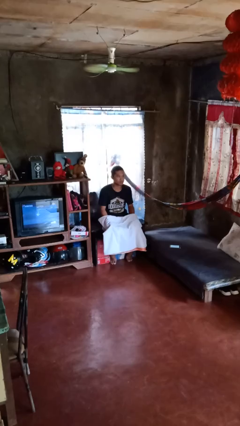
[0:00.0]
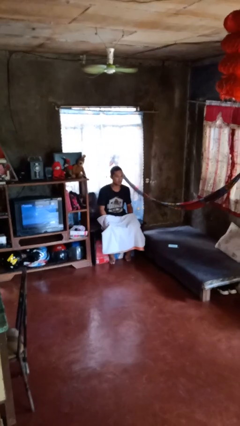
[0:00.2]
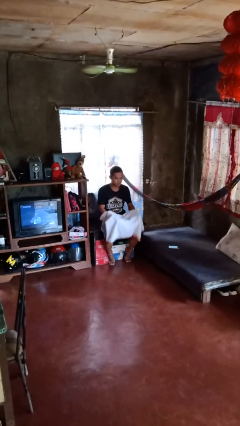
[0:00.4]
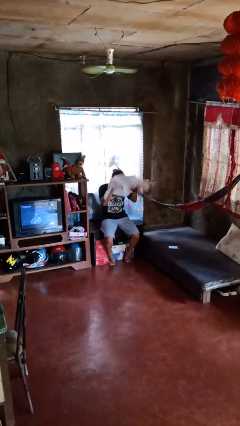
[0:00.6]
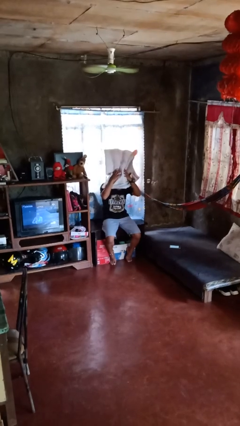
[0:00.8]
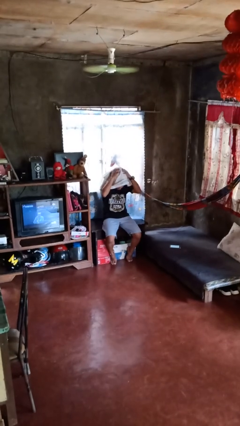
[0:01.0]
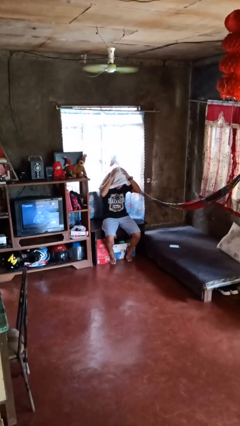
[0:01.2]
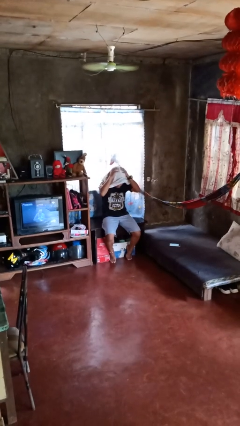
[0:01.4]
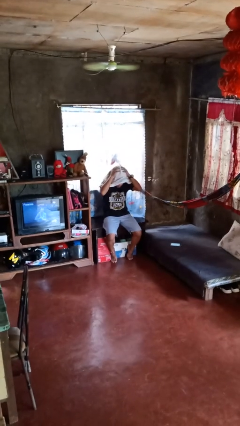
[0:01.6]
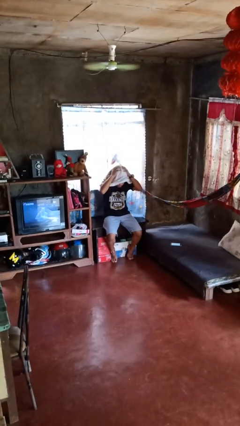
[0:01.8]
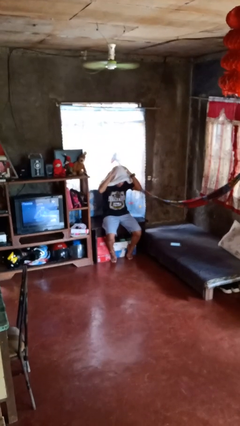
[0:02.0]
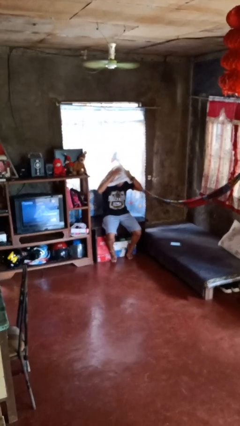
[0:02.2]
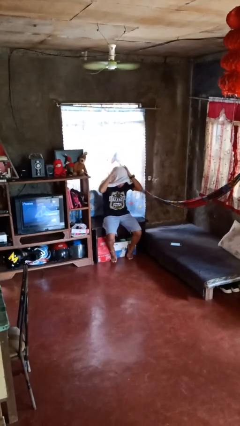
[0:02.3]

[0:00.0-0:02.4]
person wraps box

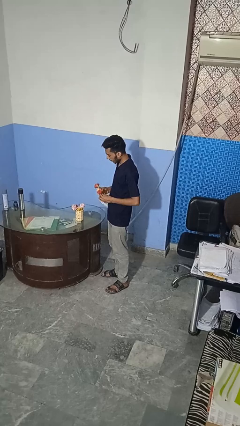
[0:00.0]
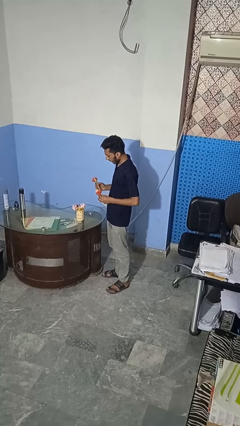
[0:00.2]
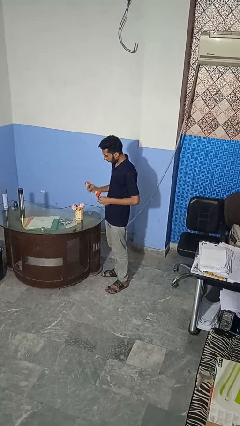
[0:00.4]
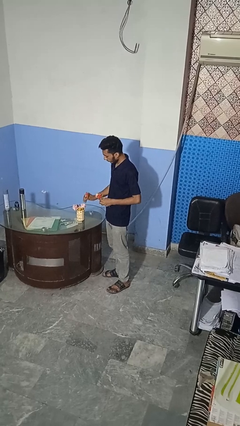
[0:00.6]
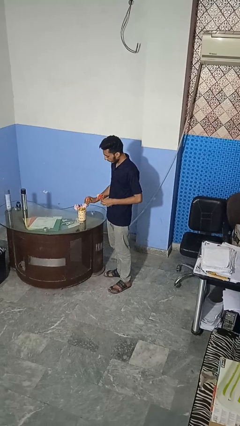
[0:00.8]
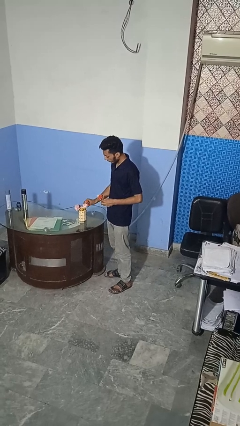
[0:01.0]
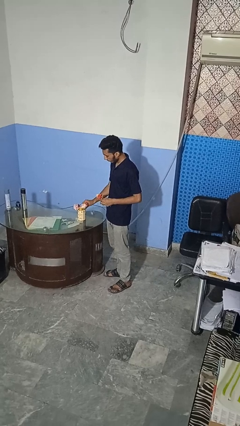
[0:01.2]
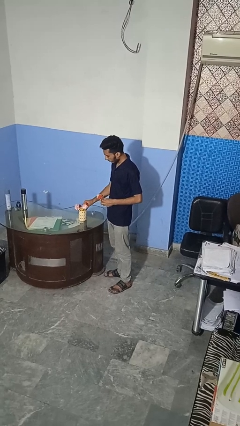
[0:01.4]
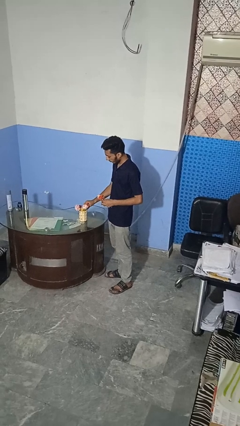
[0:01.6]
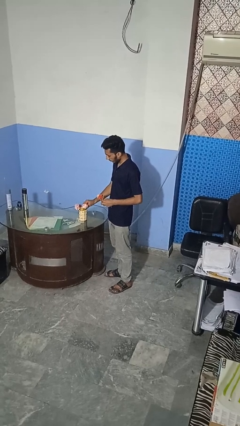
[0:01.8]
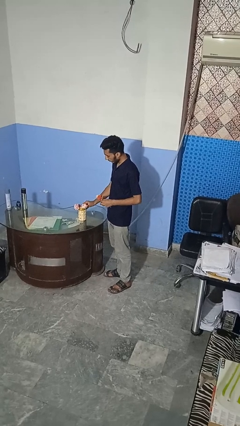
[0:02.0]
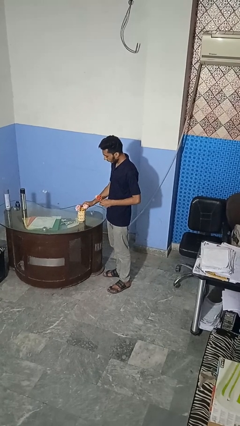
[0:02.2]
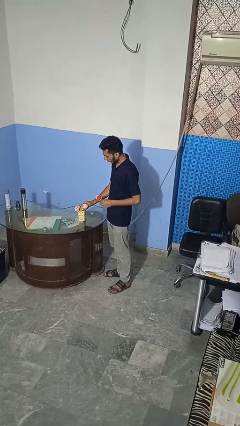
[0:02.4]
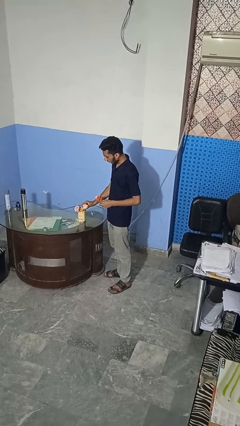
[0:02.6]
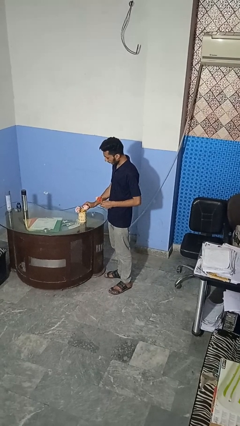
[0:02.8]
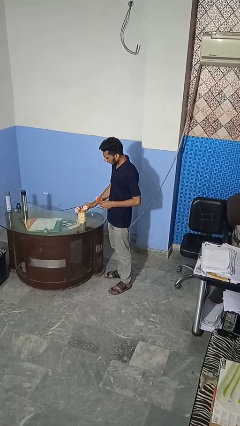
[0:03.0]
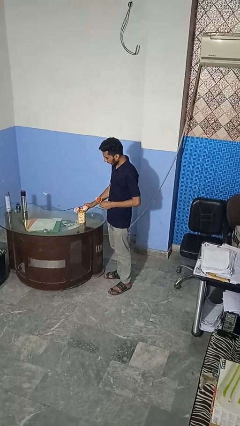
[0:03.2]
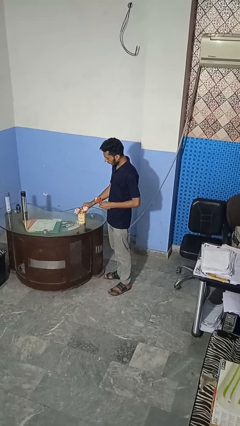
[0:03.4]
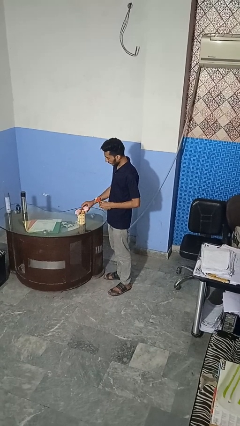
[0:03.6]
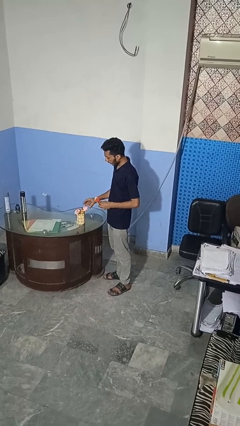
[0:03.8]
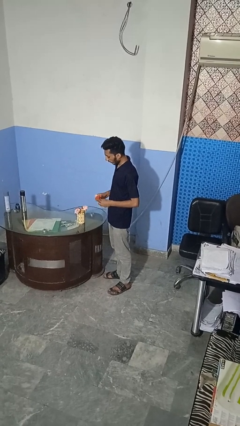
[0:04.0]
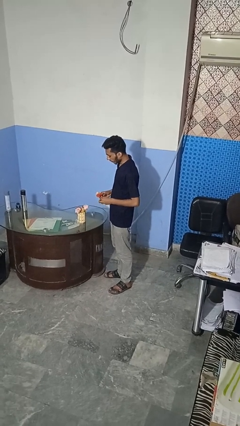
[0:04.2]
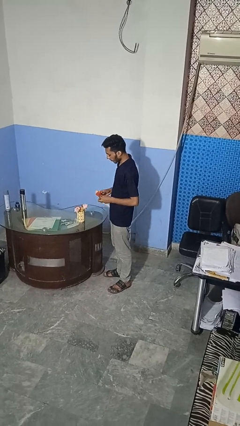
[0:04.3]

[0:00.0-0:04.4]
person arranges flowers in vase

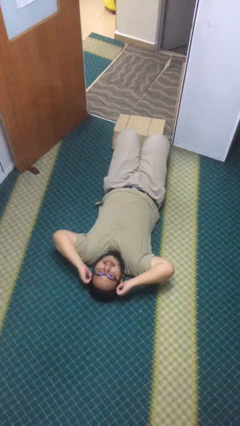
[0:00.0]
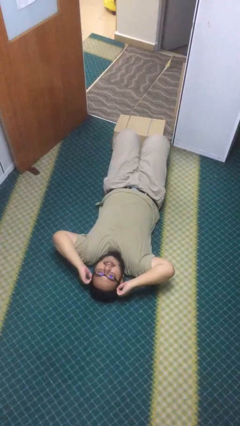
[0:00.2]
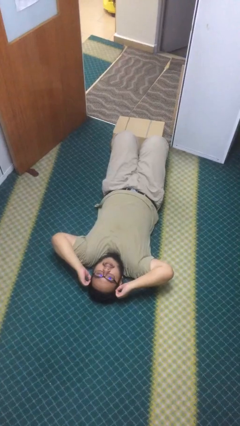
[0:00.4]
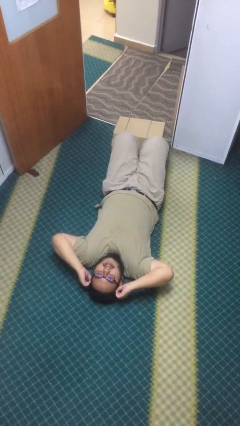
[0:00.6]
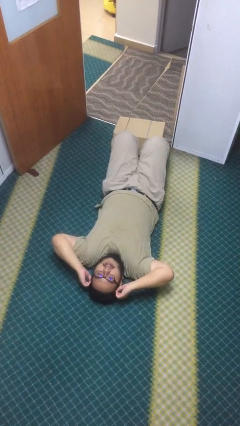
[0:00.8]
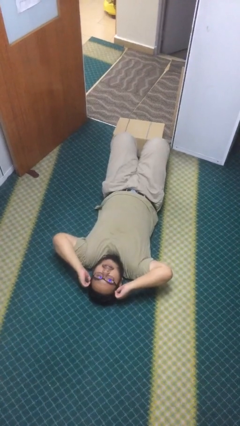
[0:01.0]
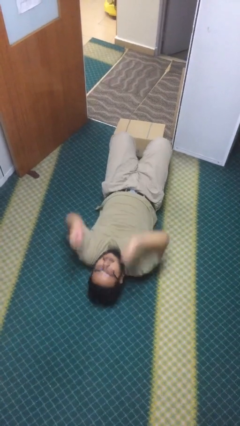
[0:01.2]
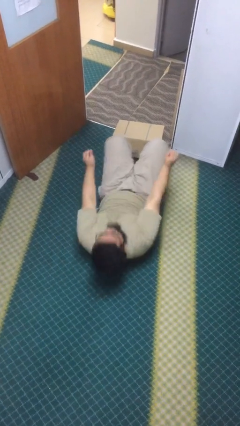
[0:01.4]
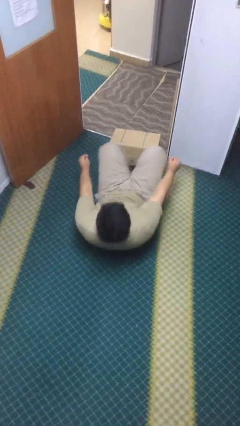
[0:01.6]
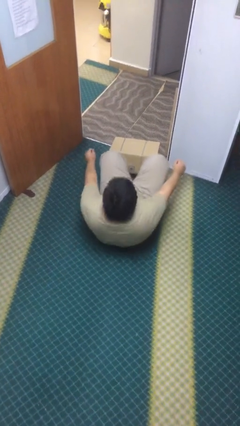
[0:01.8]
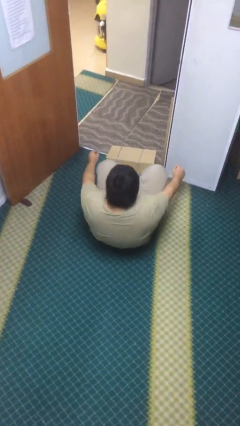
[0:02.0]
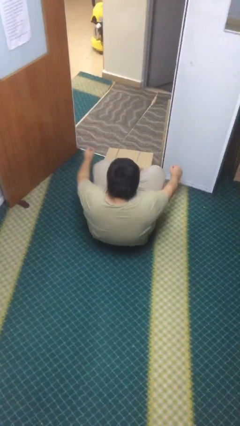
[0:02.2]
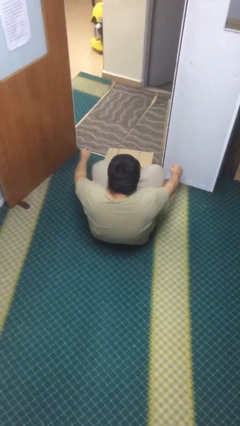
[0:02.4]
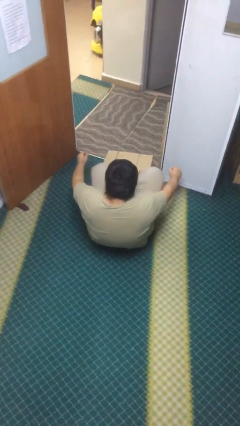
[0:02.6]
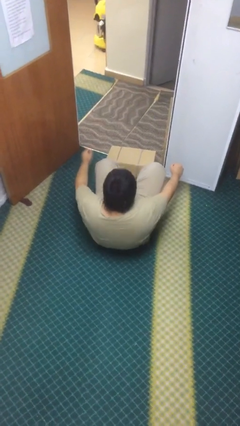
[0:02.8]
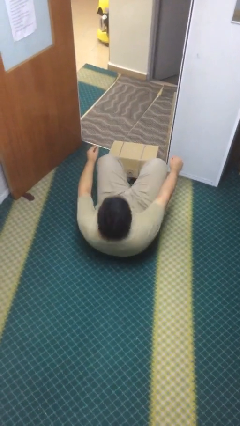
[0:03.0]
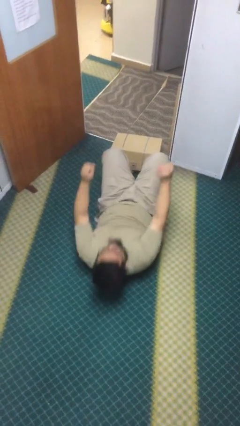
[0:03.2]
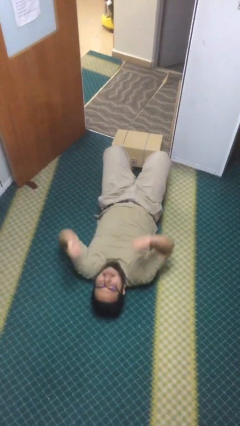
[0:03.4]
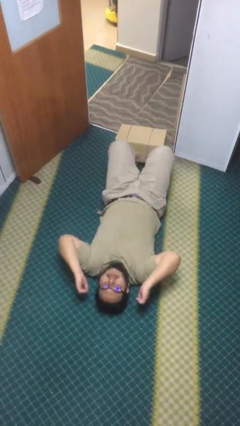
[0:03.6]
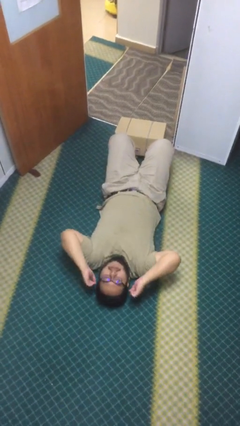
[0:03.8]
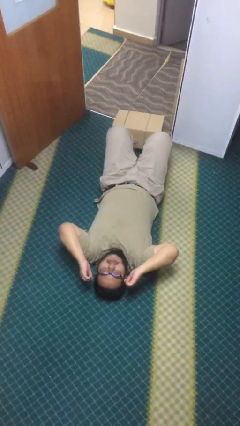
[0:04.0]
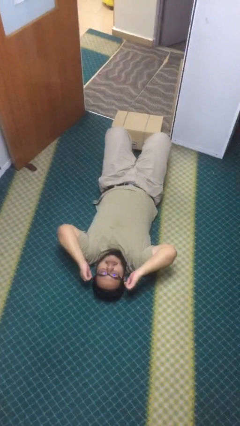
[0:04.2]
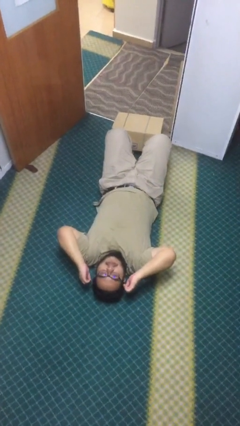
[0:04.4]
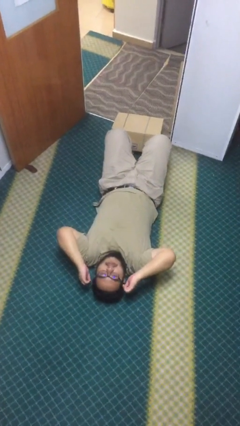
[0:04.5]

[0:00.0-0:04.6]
person exercises with situp

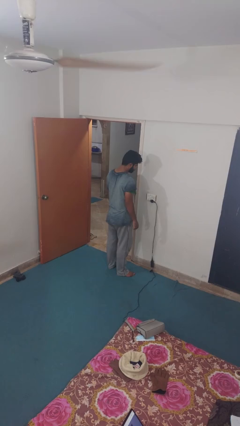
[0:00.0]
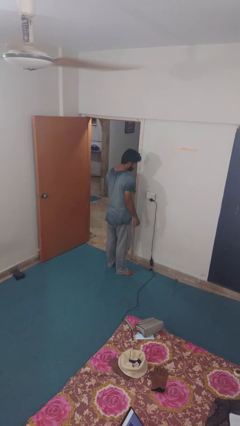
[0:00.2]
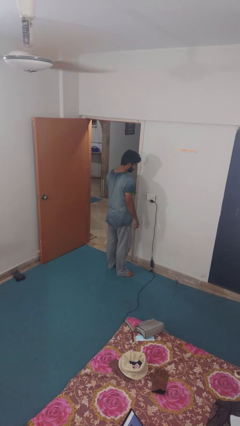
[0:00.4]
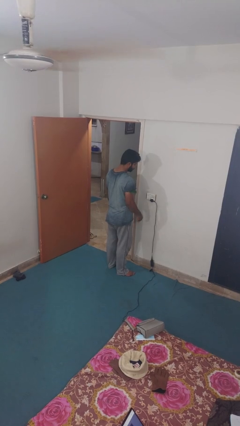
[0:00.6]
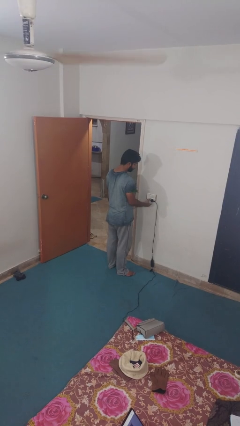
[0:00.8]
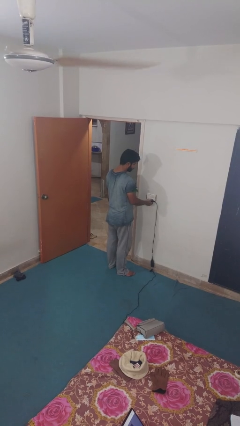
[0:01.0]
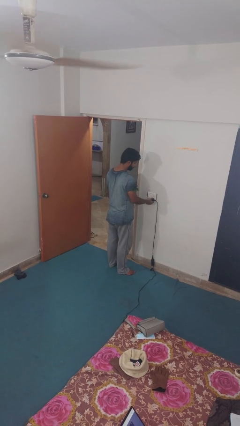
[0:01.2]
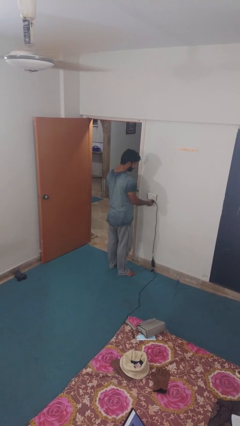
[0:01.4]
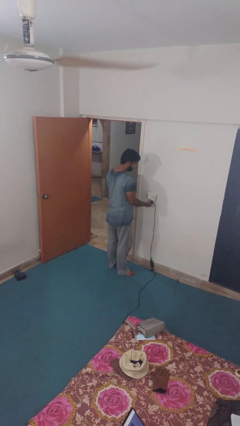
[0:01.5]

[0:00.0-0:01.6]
person unplugs from electrical socket

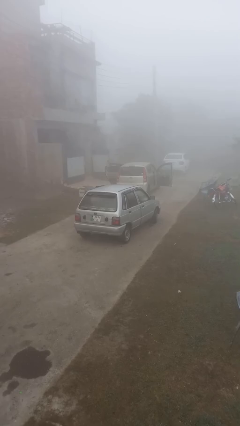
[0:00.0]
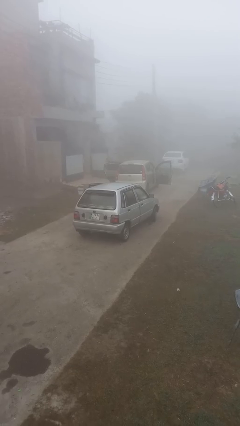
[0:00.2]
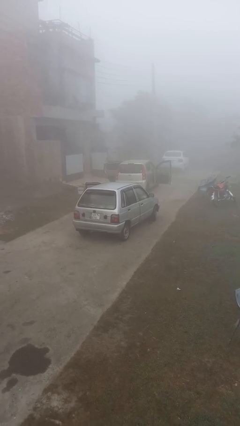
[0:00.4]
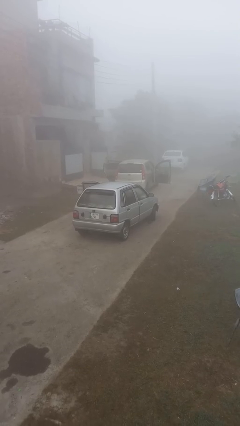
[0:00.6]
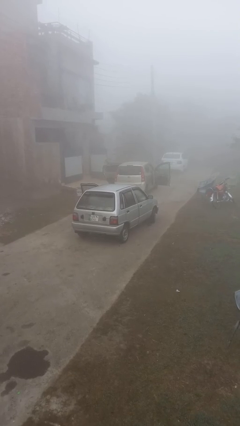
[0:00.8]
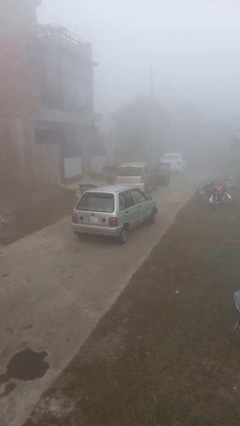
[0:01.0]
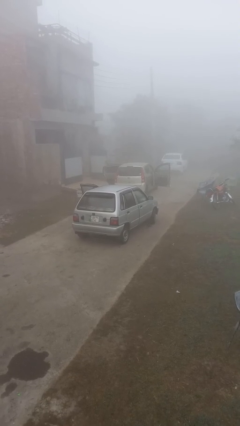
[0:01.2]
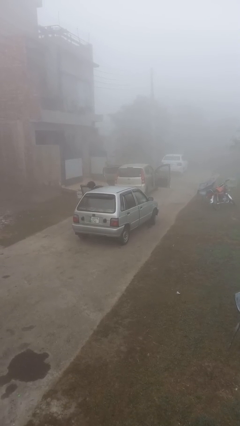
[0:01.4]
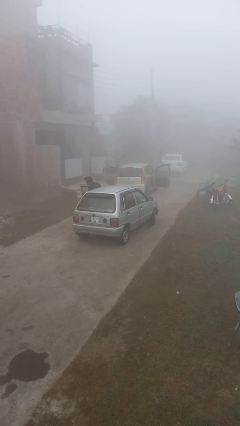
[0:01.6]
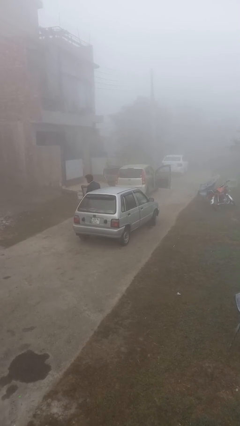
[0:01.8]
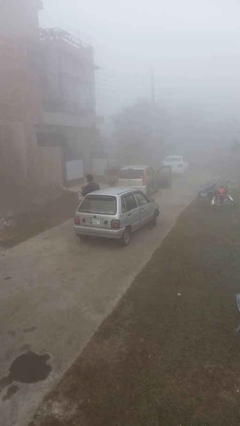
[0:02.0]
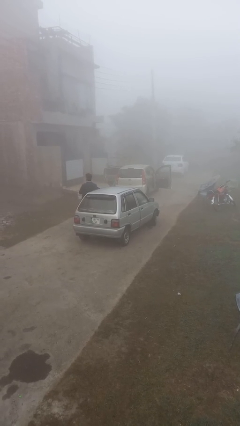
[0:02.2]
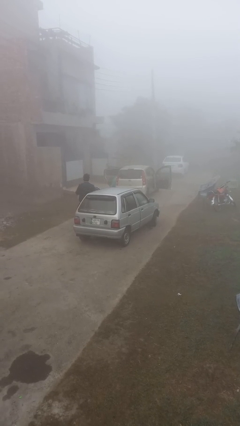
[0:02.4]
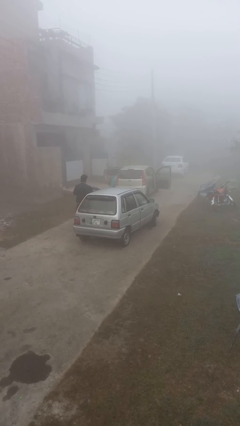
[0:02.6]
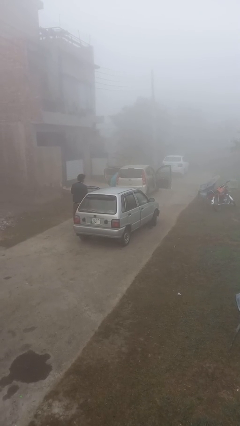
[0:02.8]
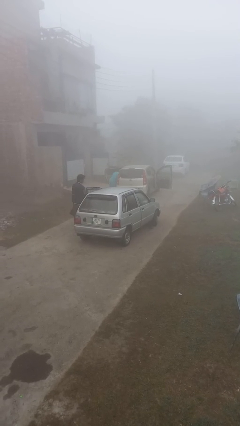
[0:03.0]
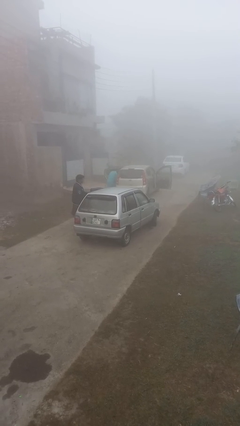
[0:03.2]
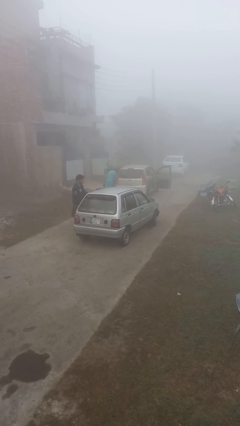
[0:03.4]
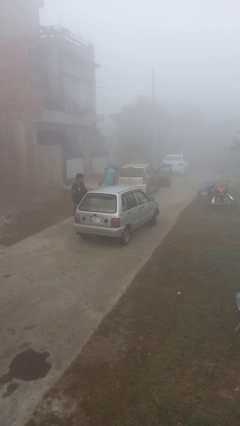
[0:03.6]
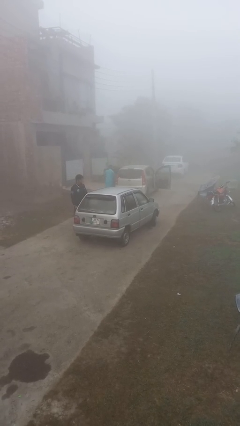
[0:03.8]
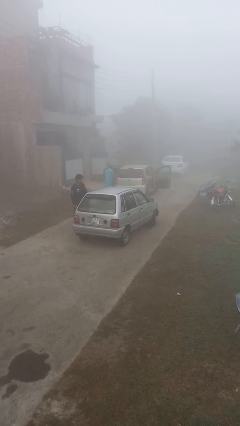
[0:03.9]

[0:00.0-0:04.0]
car drops off person

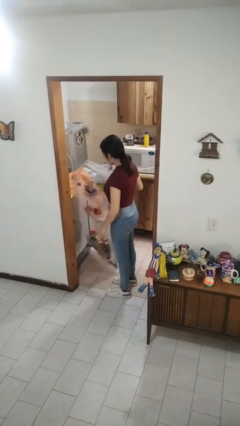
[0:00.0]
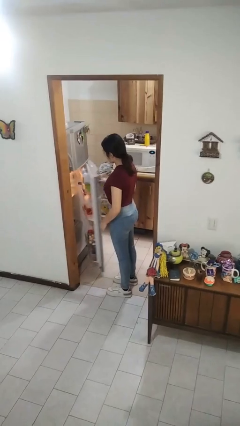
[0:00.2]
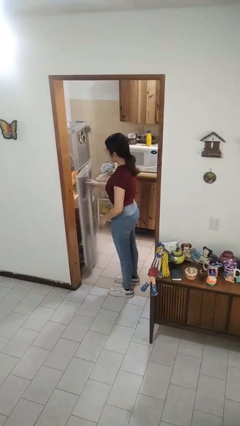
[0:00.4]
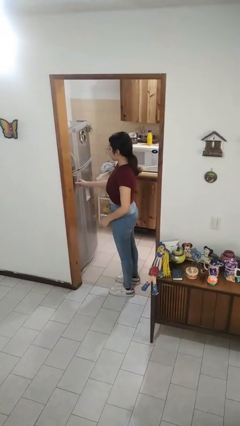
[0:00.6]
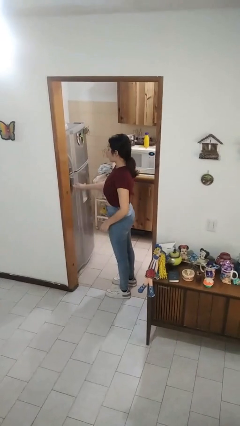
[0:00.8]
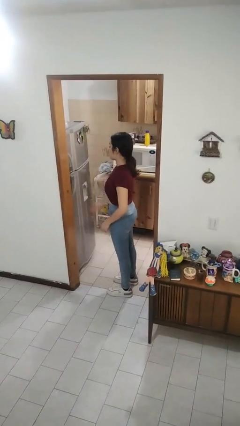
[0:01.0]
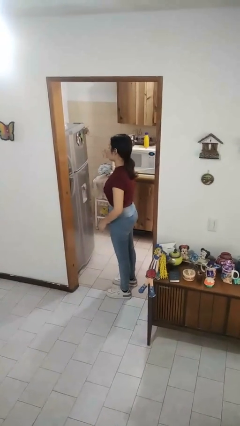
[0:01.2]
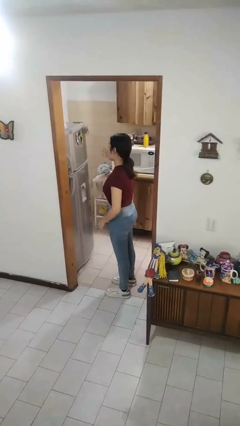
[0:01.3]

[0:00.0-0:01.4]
person closes refrigerator
